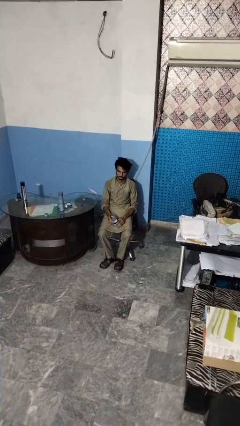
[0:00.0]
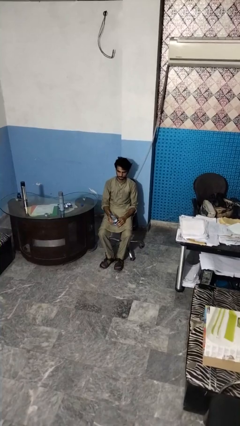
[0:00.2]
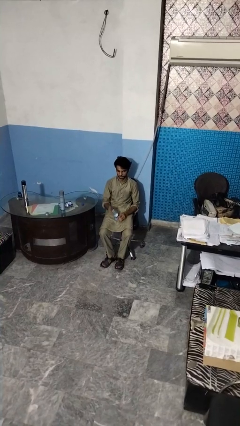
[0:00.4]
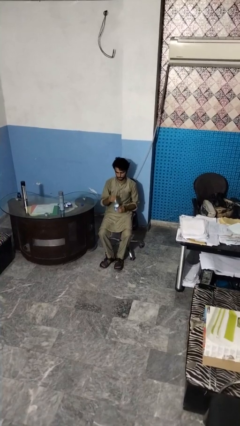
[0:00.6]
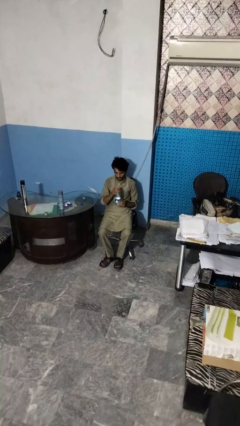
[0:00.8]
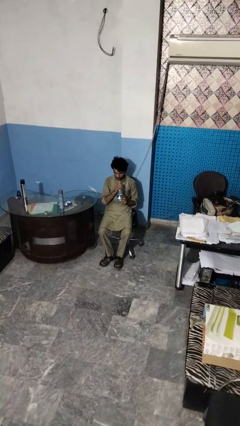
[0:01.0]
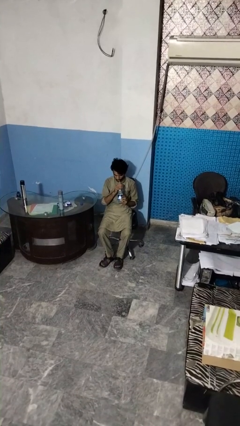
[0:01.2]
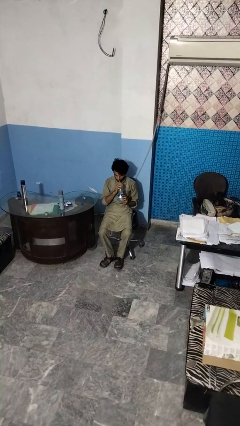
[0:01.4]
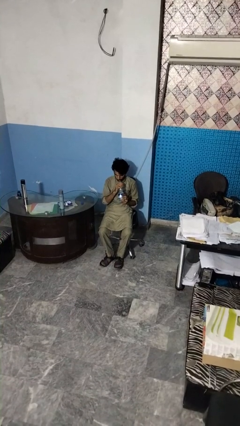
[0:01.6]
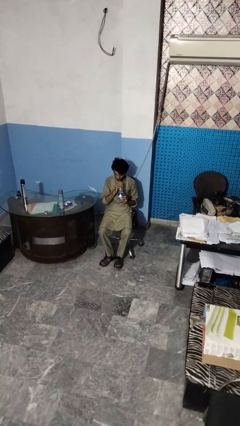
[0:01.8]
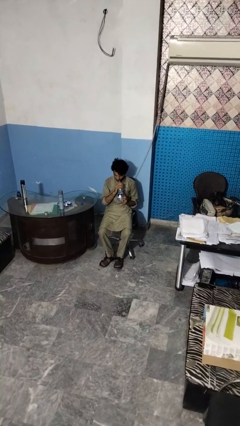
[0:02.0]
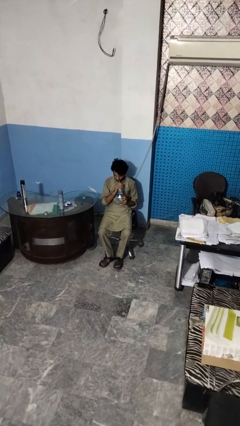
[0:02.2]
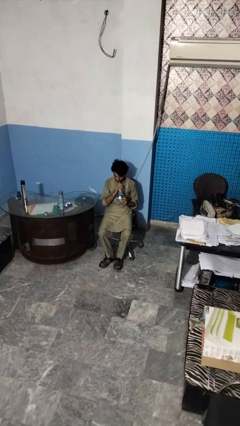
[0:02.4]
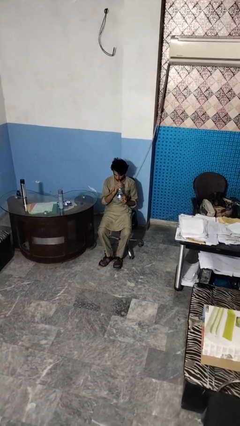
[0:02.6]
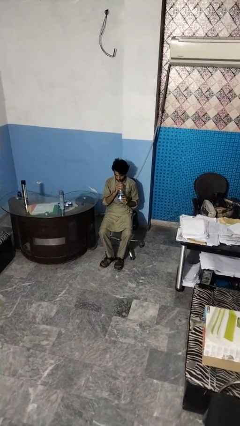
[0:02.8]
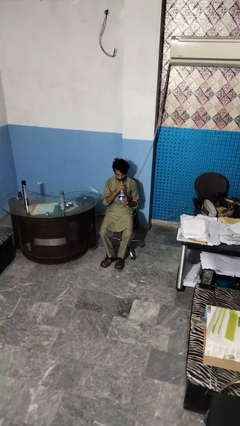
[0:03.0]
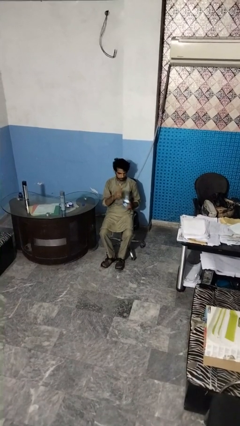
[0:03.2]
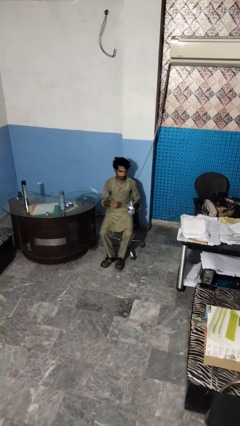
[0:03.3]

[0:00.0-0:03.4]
person drinks from straw

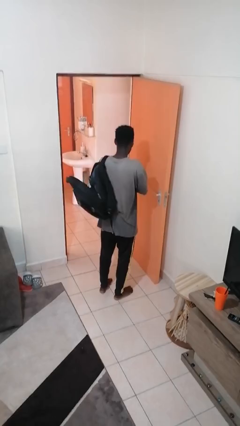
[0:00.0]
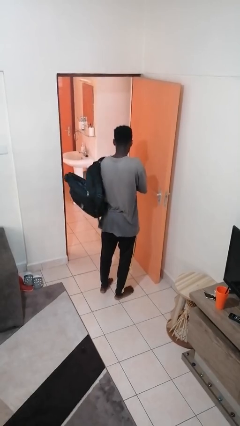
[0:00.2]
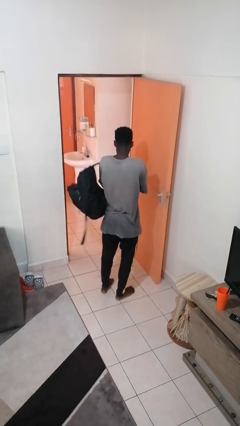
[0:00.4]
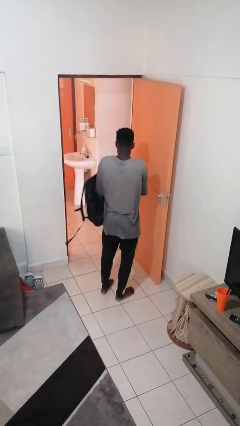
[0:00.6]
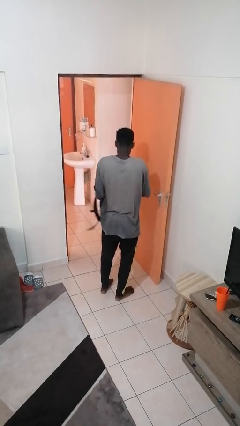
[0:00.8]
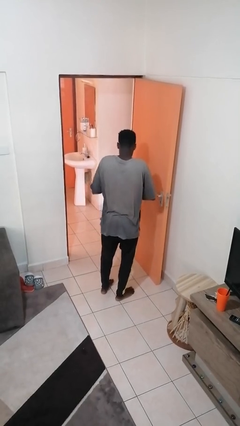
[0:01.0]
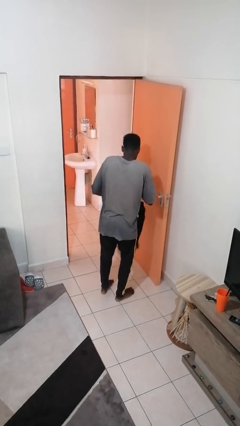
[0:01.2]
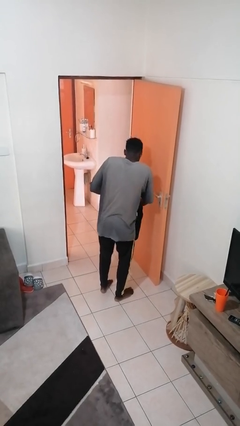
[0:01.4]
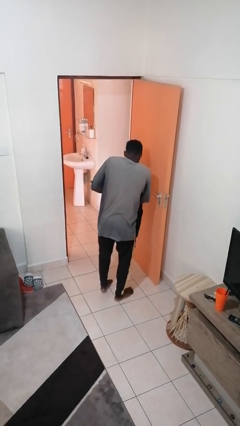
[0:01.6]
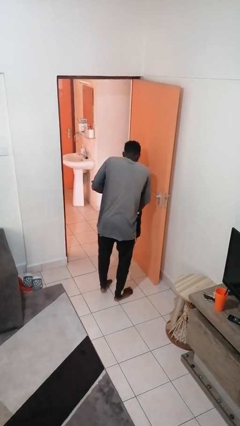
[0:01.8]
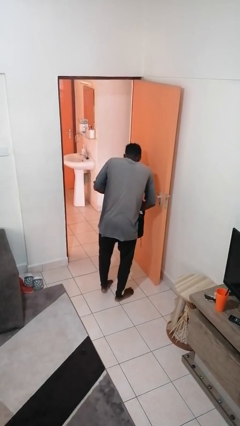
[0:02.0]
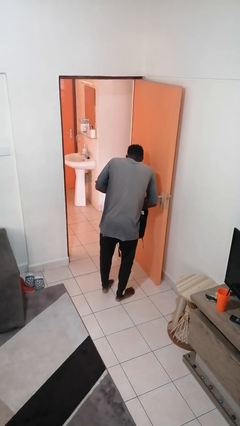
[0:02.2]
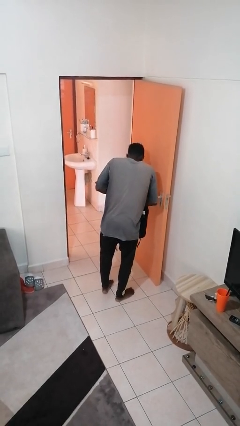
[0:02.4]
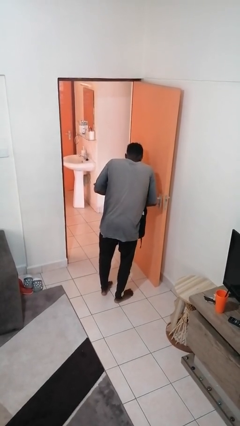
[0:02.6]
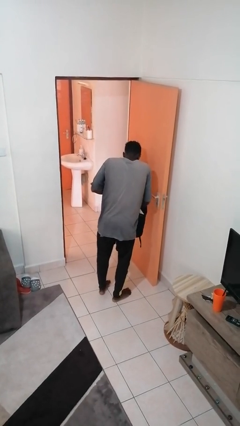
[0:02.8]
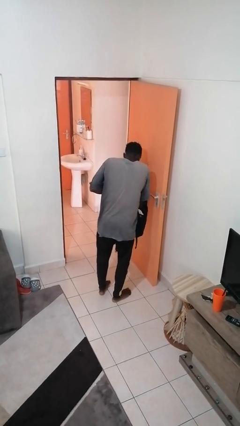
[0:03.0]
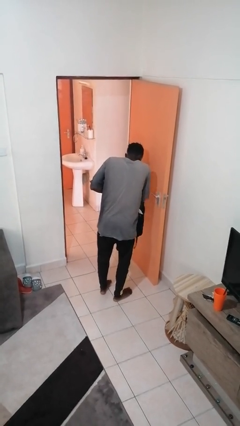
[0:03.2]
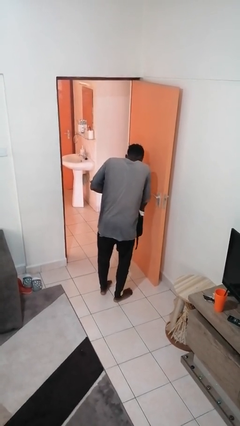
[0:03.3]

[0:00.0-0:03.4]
person searches in backpack

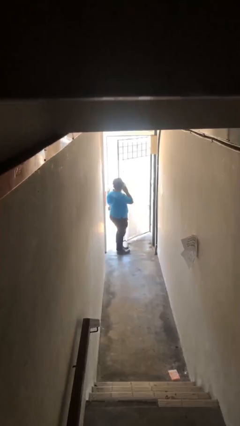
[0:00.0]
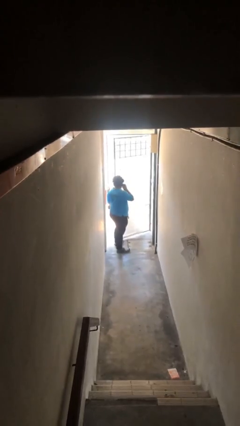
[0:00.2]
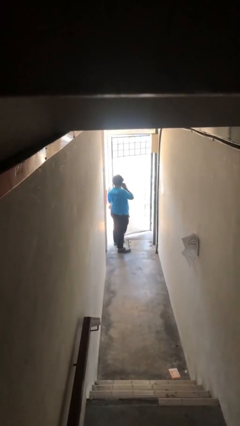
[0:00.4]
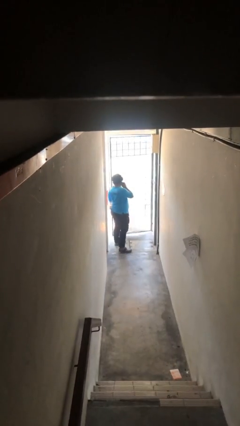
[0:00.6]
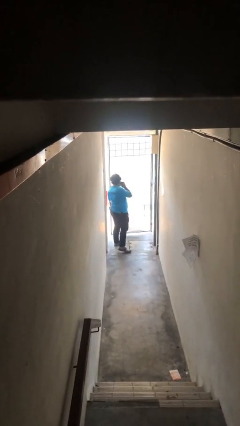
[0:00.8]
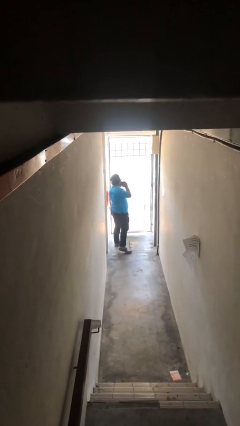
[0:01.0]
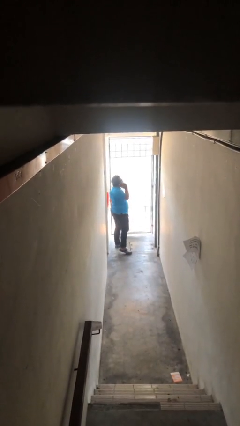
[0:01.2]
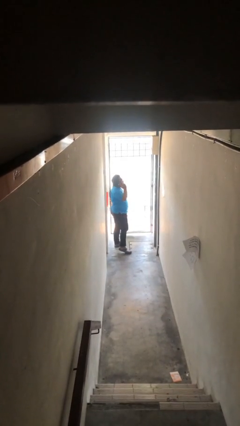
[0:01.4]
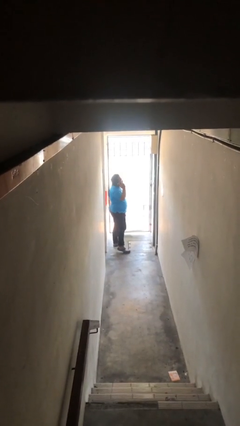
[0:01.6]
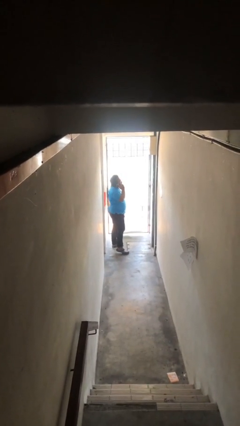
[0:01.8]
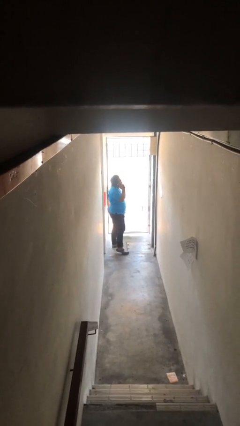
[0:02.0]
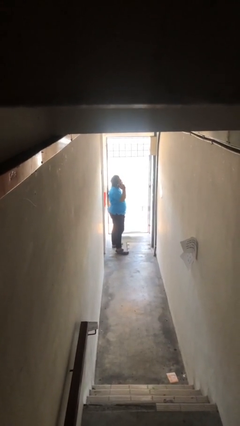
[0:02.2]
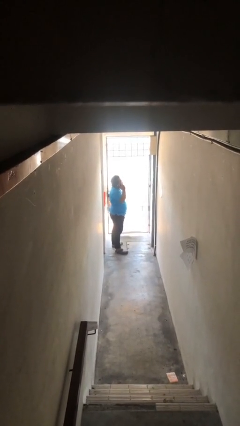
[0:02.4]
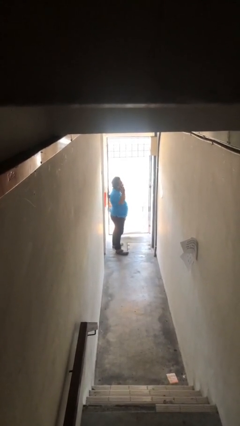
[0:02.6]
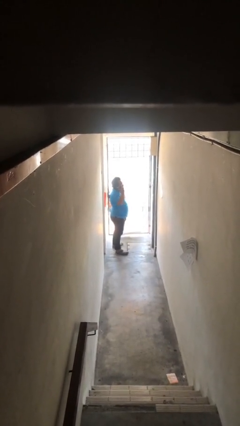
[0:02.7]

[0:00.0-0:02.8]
person closes facility door

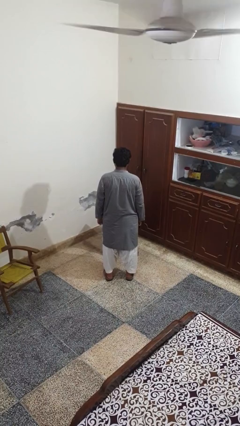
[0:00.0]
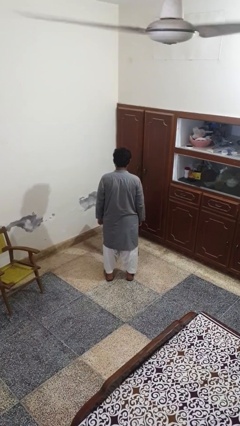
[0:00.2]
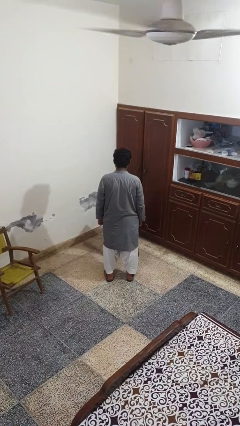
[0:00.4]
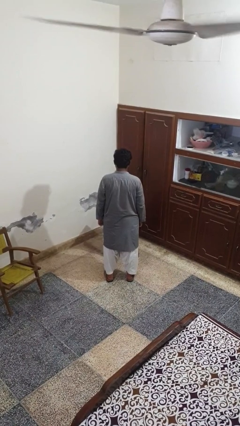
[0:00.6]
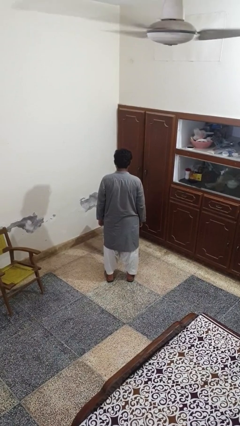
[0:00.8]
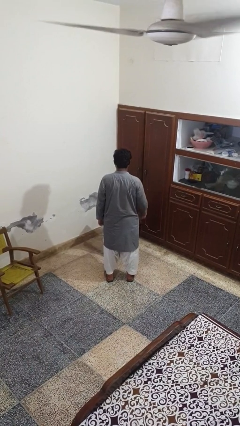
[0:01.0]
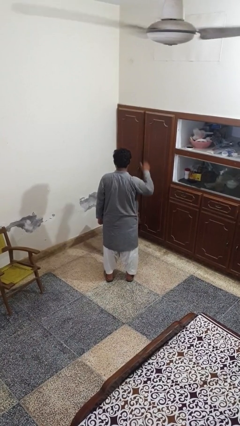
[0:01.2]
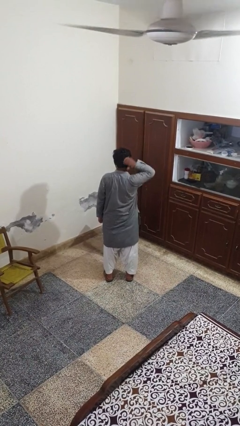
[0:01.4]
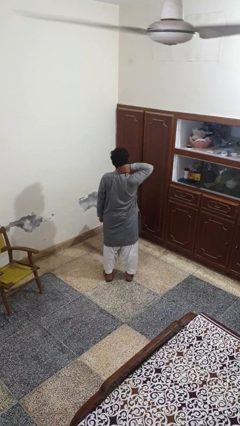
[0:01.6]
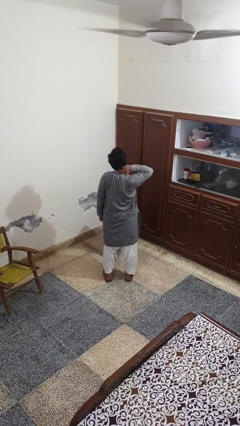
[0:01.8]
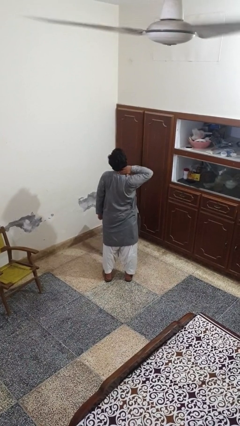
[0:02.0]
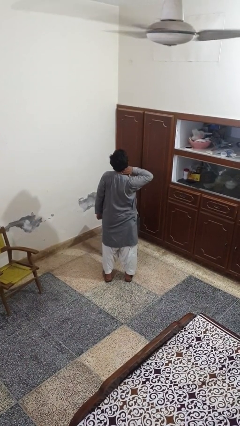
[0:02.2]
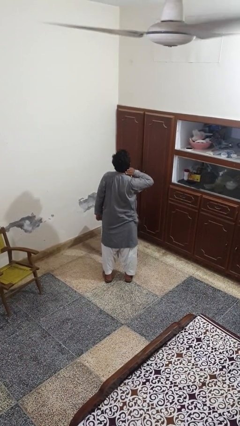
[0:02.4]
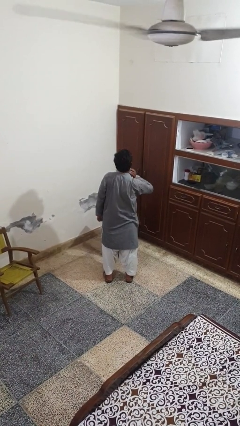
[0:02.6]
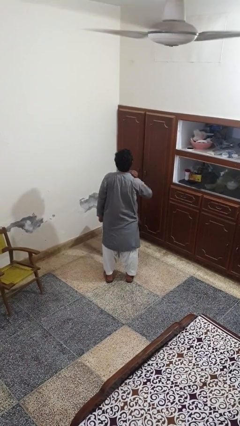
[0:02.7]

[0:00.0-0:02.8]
person rubs neck

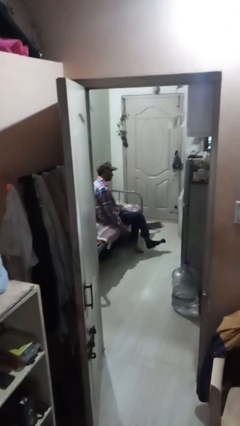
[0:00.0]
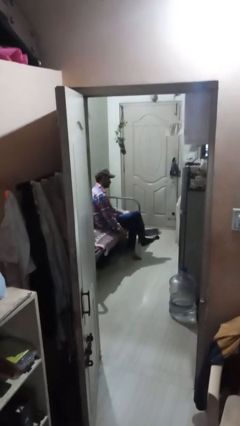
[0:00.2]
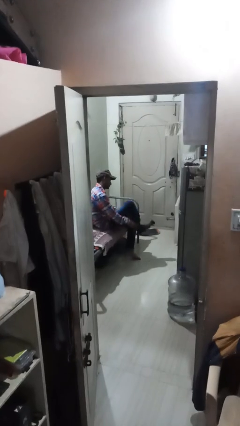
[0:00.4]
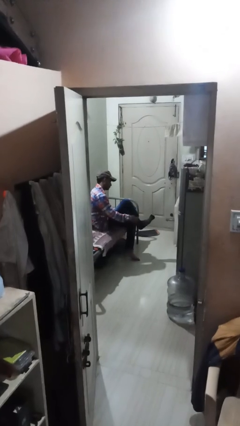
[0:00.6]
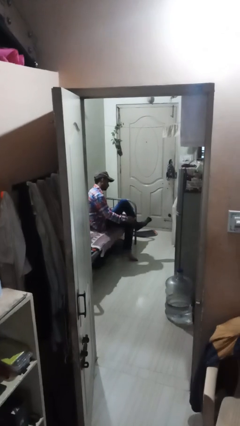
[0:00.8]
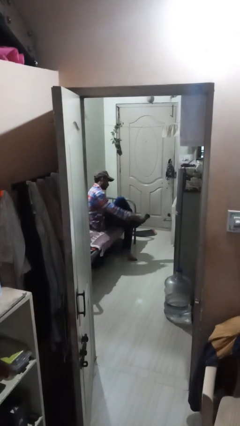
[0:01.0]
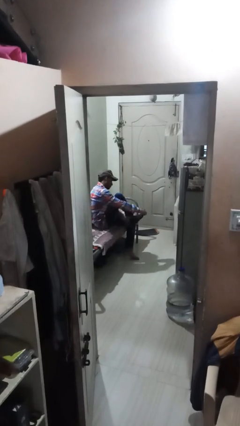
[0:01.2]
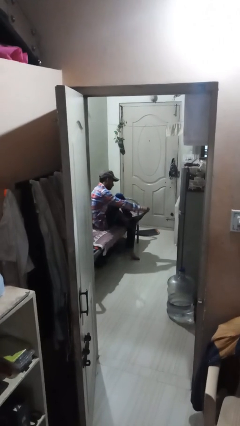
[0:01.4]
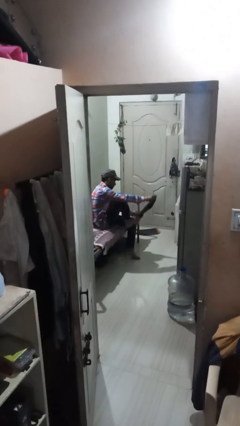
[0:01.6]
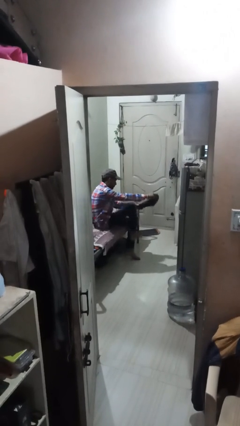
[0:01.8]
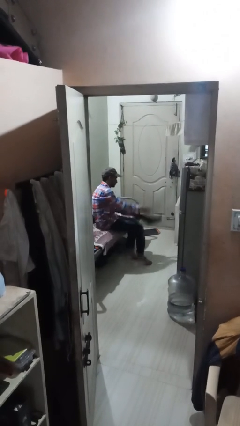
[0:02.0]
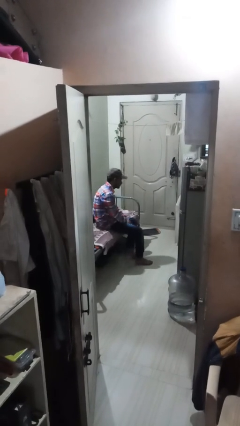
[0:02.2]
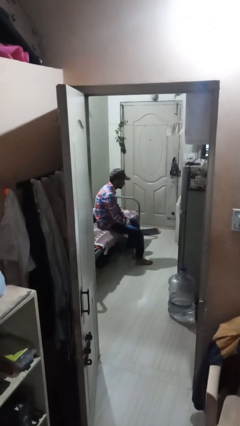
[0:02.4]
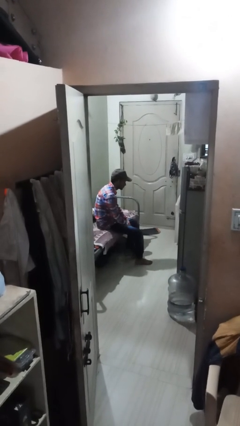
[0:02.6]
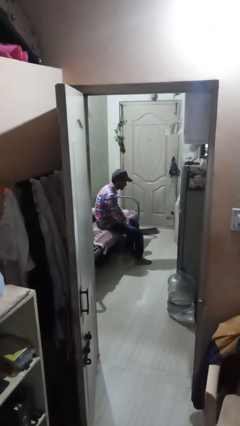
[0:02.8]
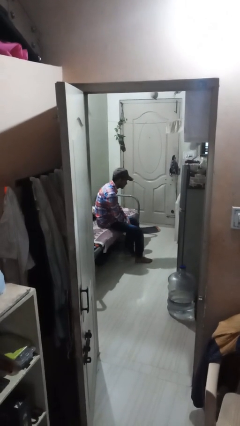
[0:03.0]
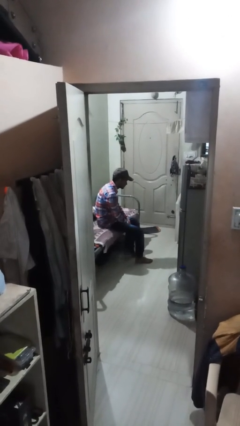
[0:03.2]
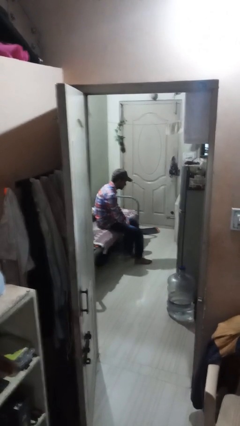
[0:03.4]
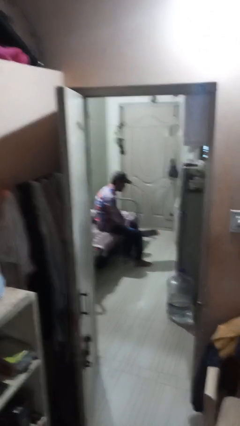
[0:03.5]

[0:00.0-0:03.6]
person takes off socks

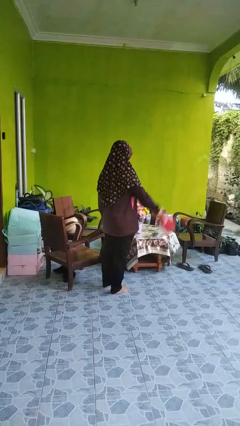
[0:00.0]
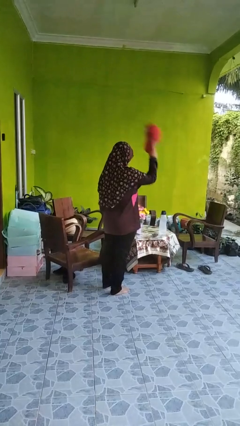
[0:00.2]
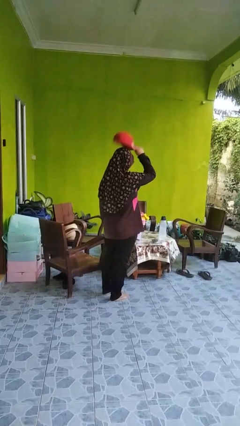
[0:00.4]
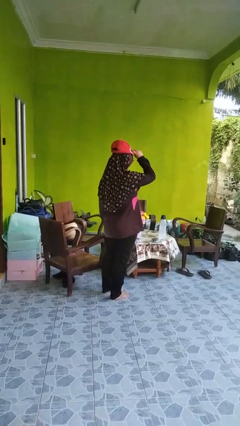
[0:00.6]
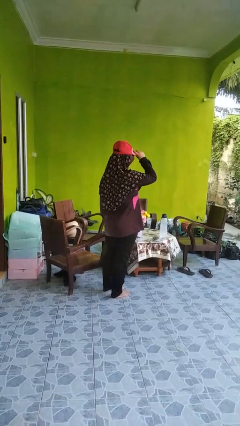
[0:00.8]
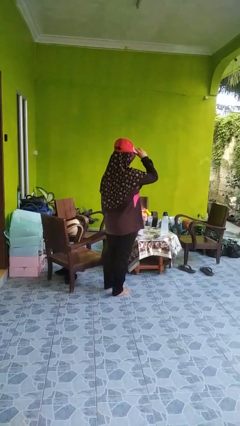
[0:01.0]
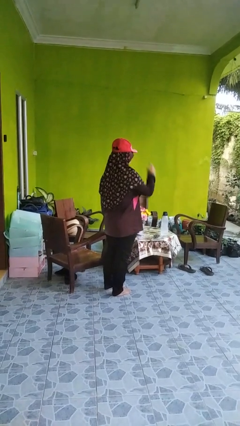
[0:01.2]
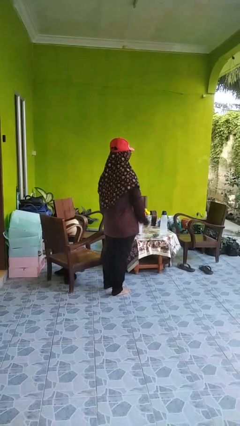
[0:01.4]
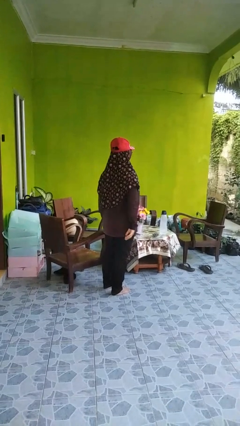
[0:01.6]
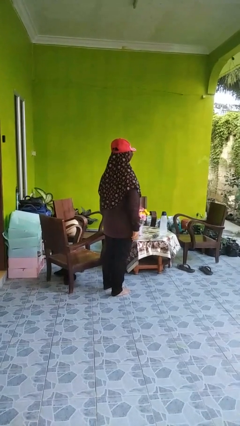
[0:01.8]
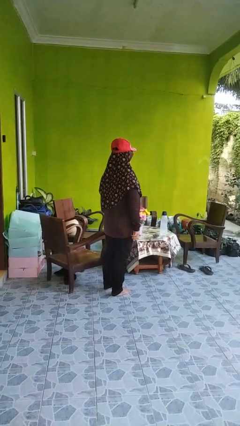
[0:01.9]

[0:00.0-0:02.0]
person puts on hat
